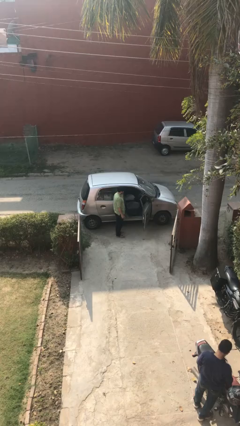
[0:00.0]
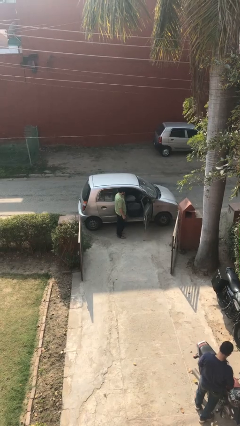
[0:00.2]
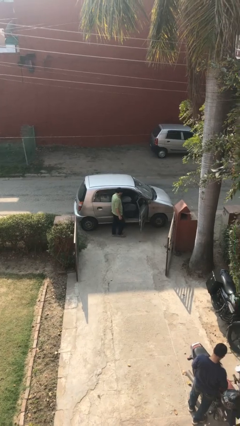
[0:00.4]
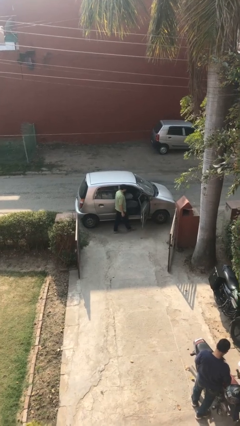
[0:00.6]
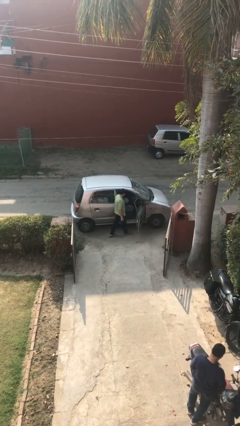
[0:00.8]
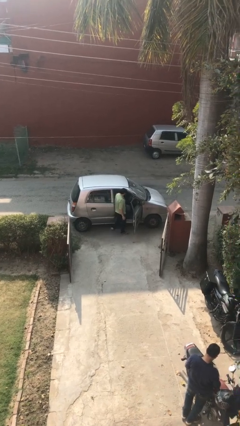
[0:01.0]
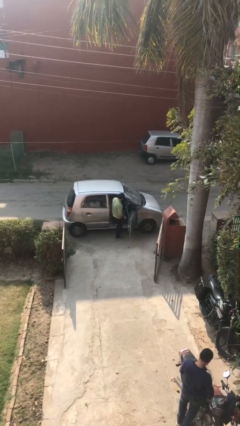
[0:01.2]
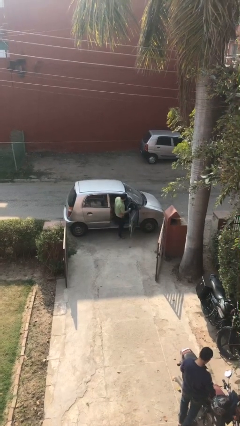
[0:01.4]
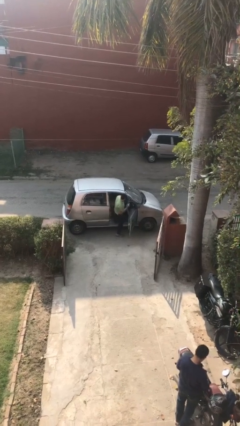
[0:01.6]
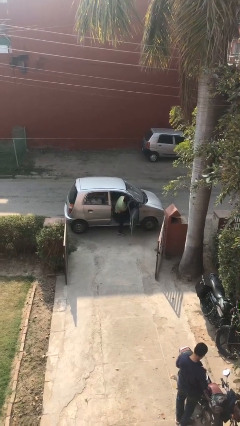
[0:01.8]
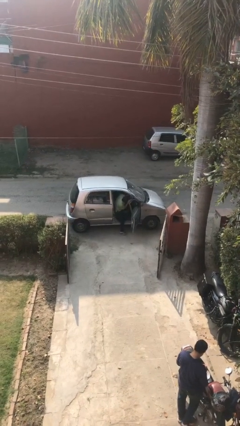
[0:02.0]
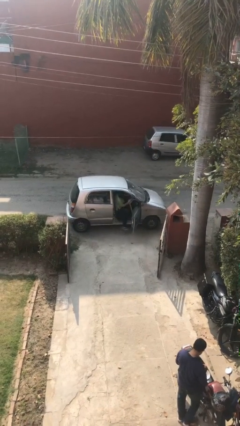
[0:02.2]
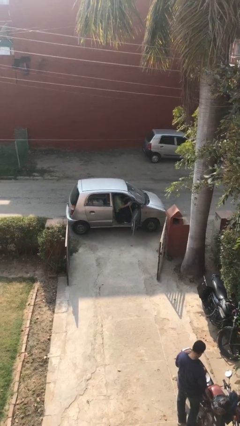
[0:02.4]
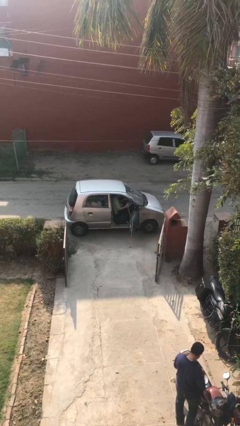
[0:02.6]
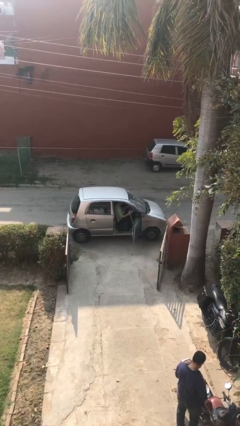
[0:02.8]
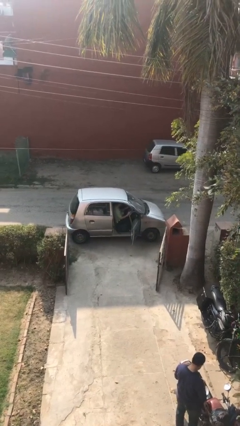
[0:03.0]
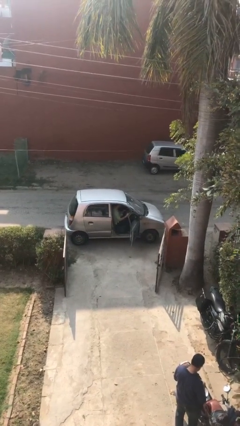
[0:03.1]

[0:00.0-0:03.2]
person enters car

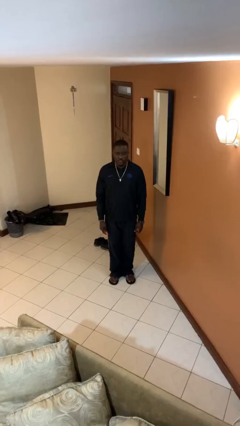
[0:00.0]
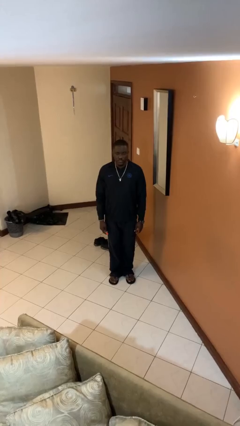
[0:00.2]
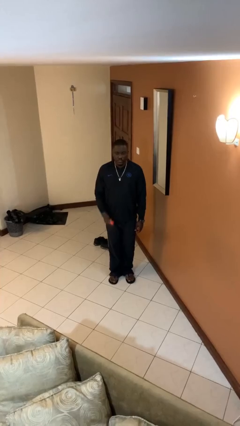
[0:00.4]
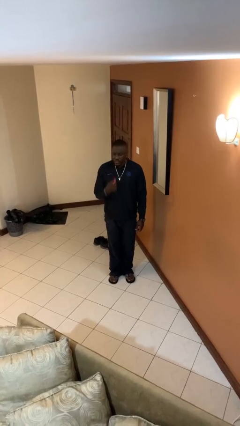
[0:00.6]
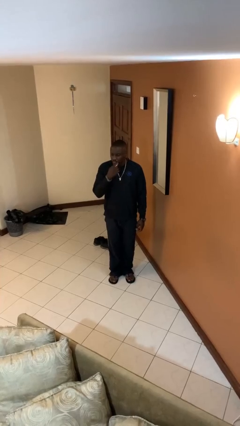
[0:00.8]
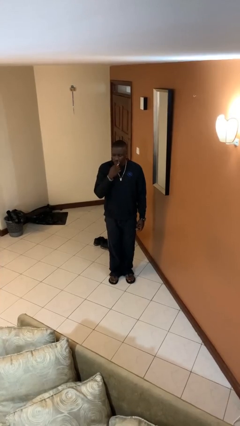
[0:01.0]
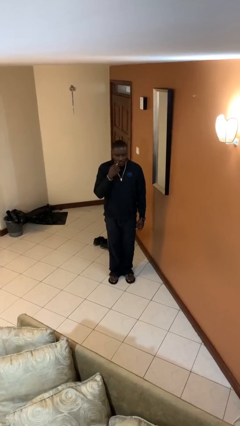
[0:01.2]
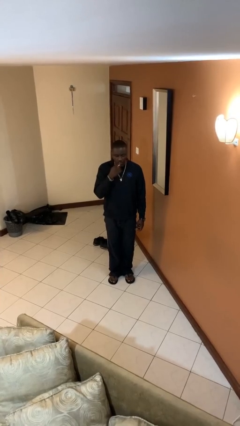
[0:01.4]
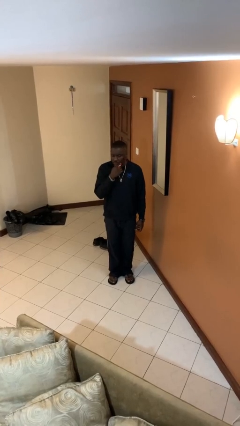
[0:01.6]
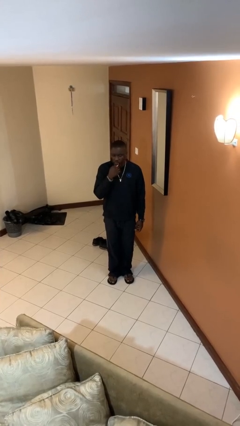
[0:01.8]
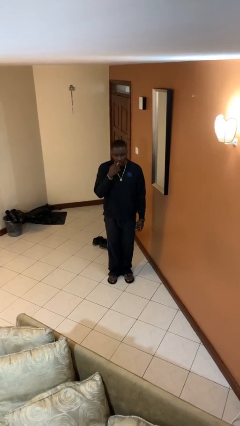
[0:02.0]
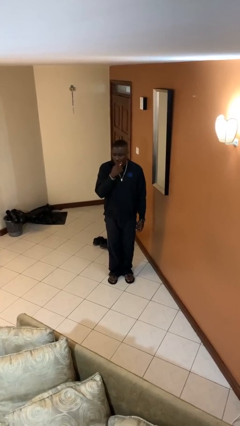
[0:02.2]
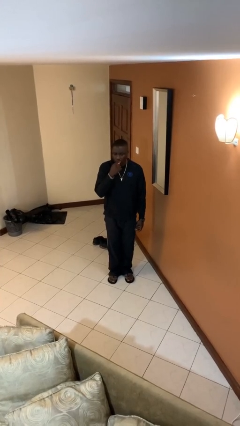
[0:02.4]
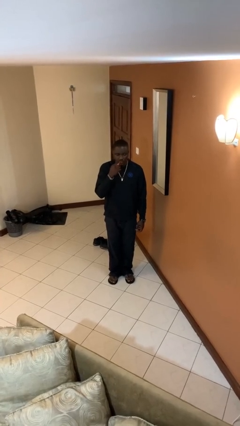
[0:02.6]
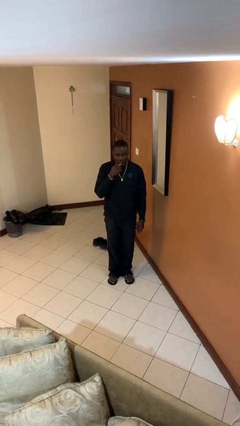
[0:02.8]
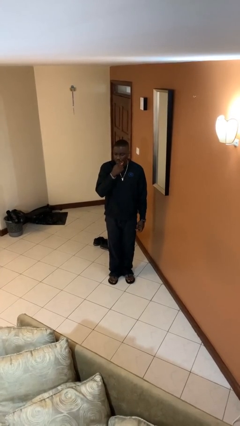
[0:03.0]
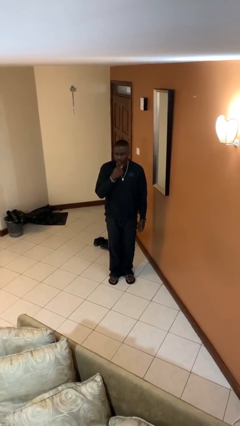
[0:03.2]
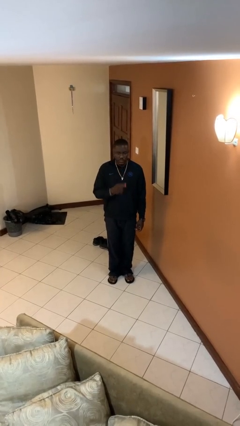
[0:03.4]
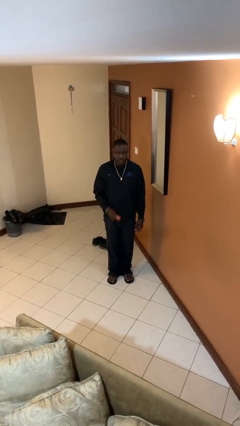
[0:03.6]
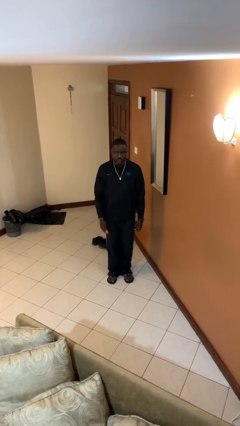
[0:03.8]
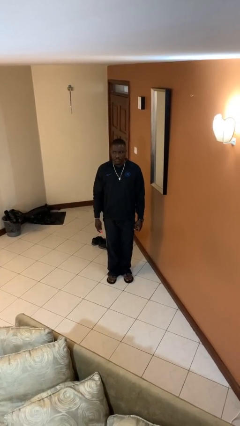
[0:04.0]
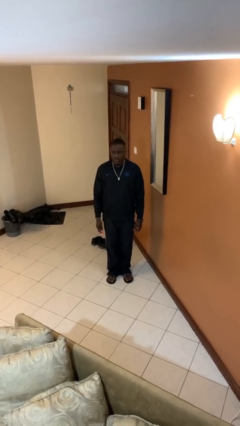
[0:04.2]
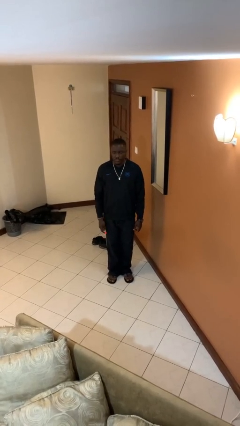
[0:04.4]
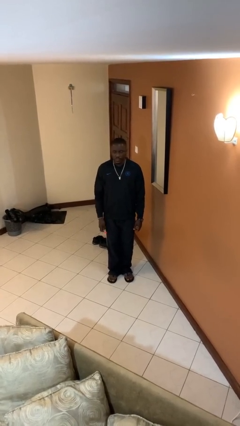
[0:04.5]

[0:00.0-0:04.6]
person applies lip makeup

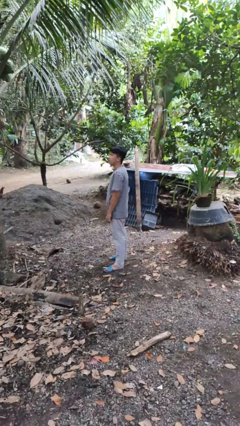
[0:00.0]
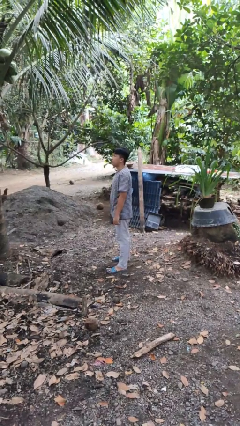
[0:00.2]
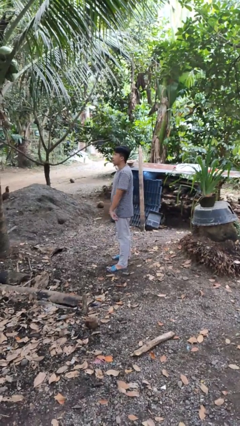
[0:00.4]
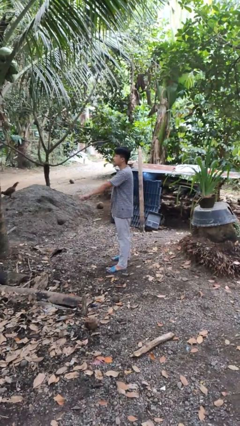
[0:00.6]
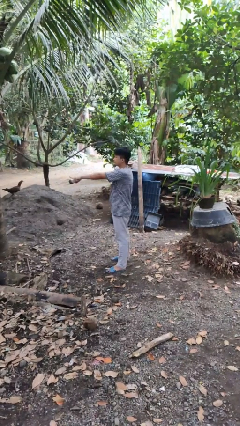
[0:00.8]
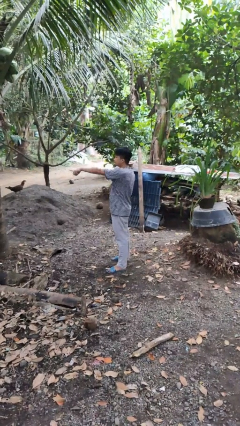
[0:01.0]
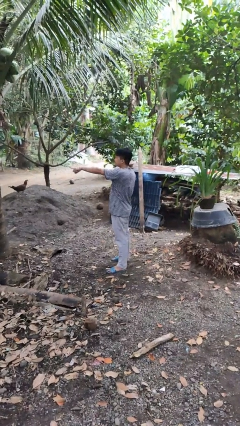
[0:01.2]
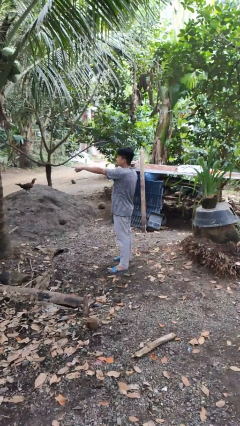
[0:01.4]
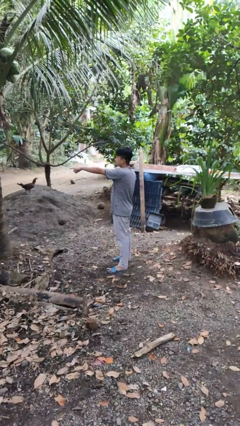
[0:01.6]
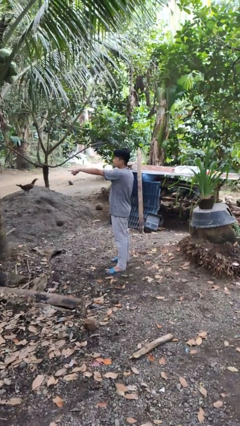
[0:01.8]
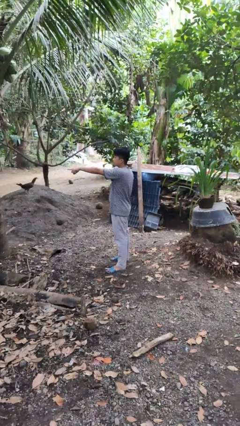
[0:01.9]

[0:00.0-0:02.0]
person points at person

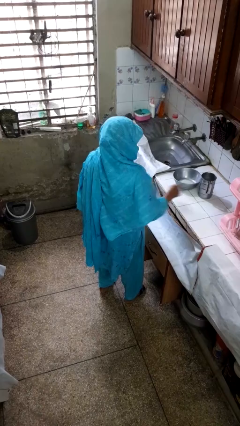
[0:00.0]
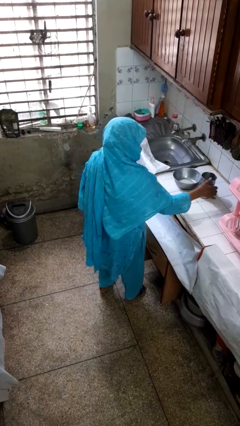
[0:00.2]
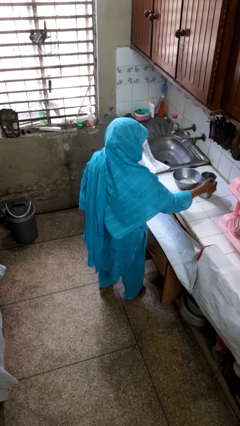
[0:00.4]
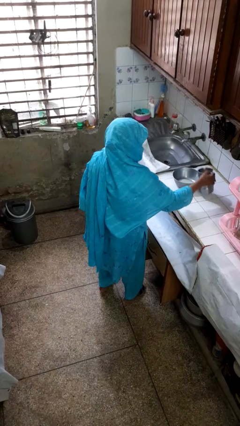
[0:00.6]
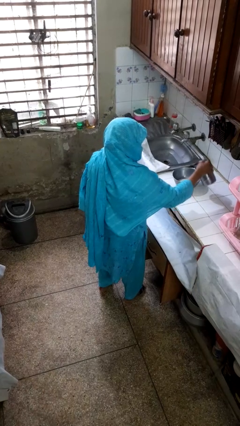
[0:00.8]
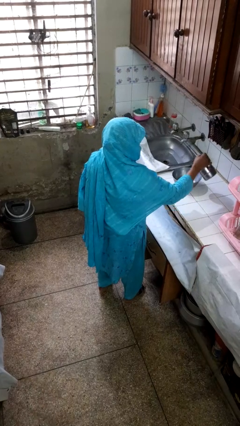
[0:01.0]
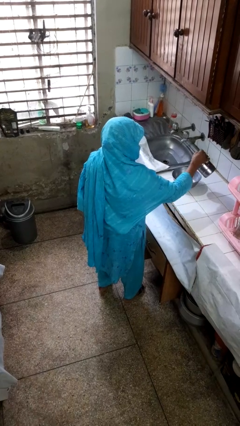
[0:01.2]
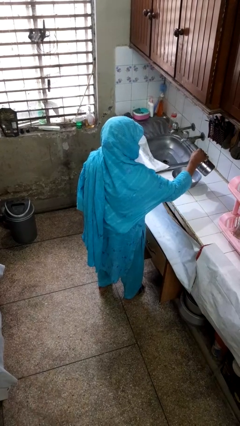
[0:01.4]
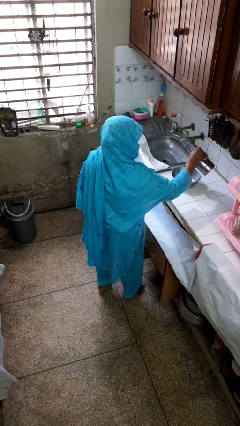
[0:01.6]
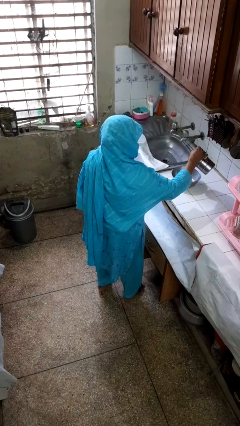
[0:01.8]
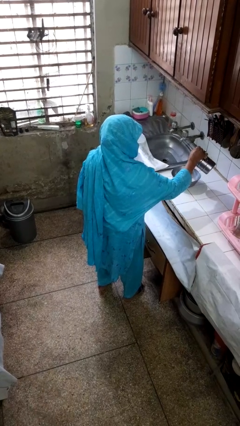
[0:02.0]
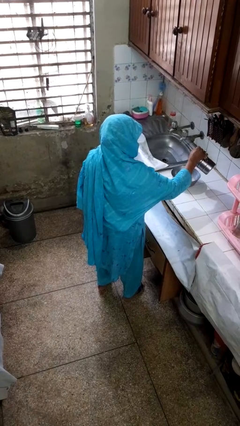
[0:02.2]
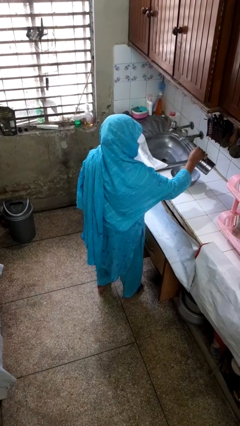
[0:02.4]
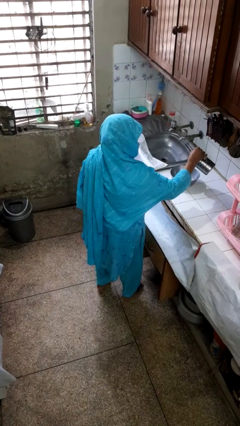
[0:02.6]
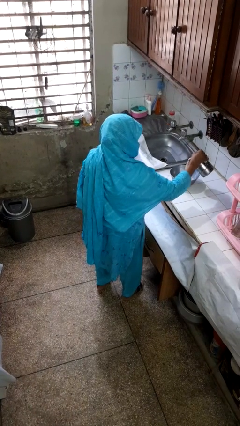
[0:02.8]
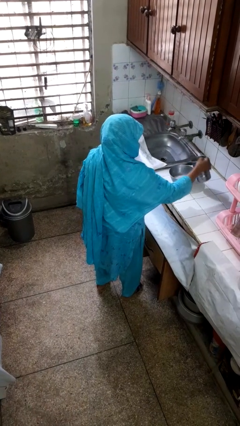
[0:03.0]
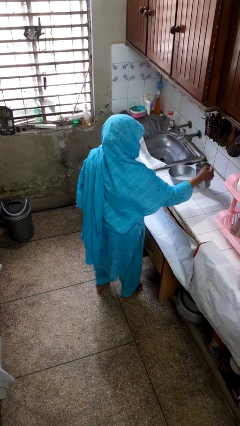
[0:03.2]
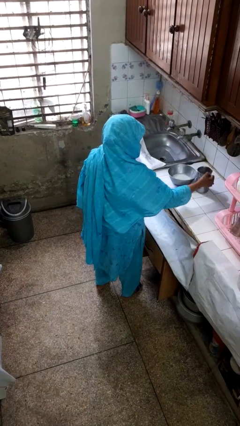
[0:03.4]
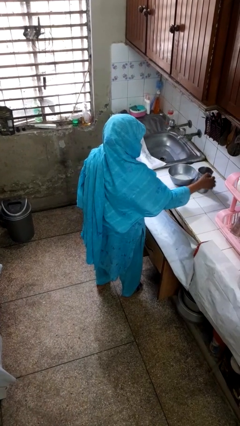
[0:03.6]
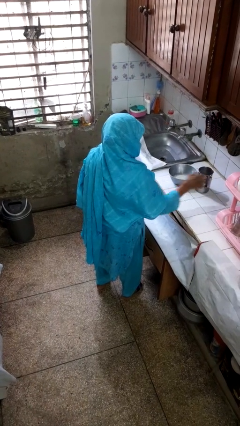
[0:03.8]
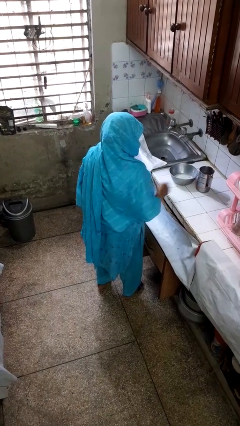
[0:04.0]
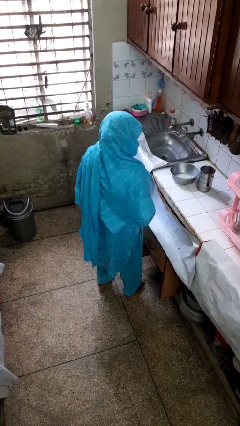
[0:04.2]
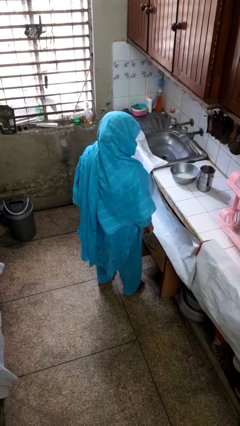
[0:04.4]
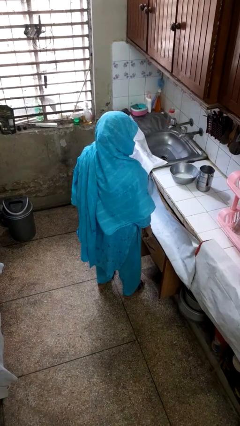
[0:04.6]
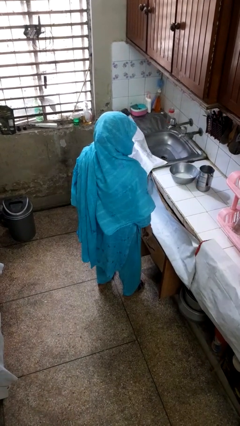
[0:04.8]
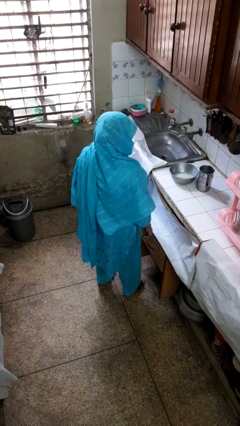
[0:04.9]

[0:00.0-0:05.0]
person pours into bowl

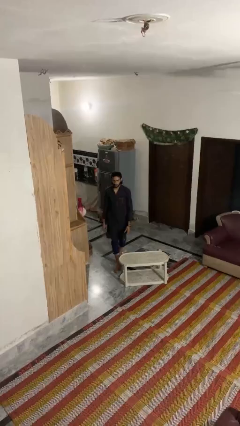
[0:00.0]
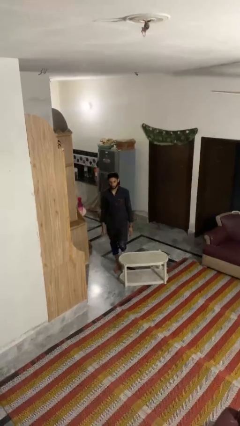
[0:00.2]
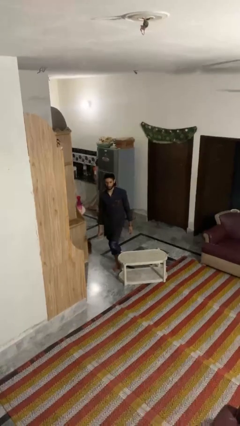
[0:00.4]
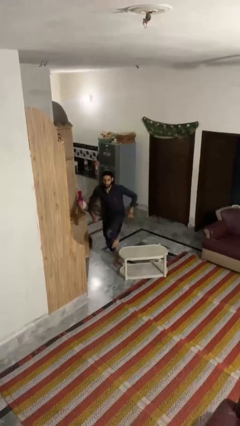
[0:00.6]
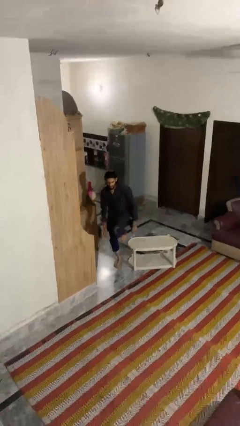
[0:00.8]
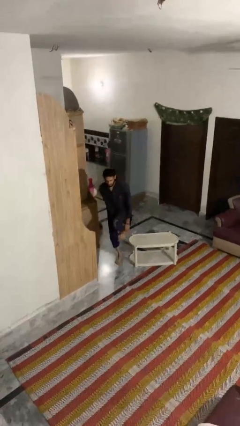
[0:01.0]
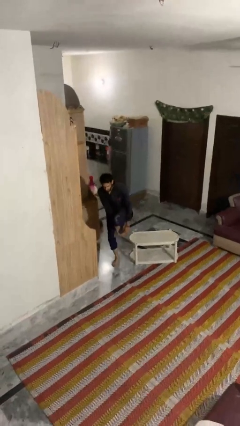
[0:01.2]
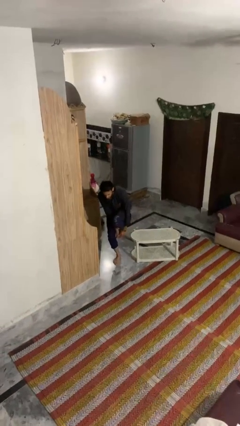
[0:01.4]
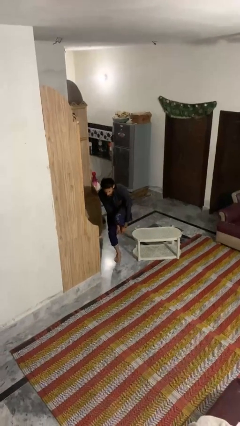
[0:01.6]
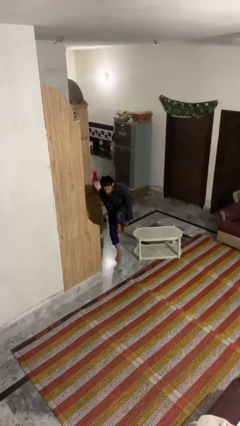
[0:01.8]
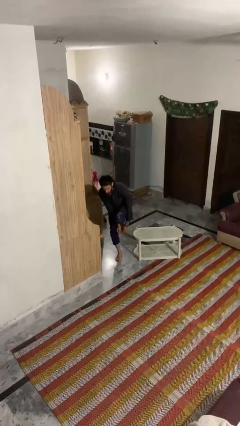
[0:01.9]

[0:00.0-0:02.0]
person bumps into table

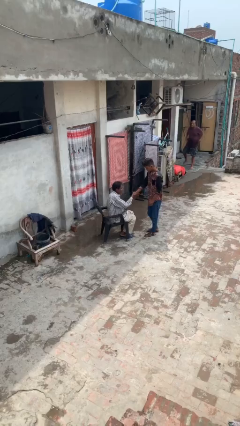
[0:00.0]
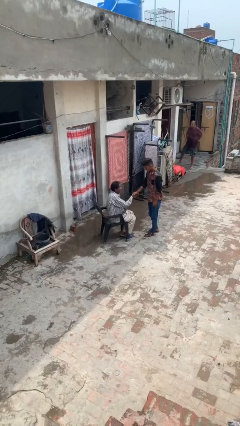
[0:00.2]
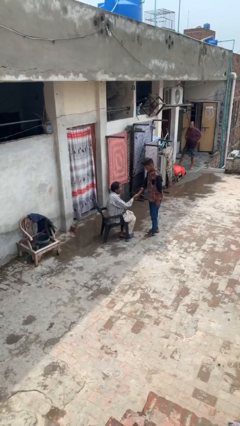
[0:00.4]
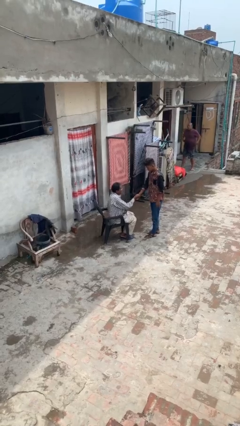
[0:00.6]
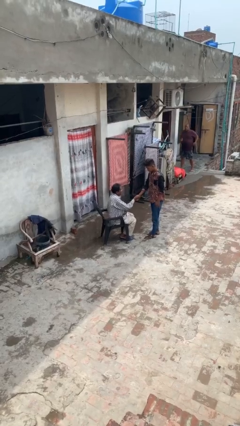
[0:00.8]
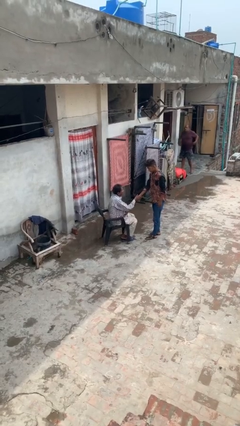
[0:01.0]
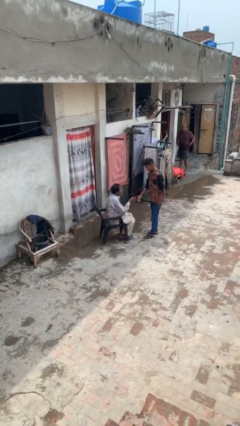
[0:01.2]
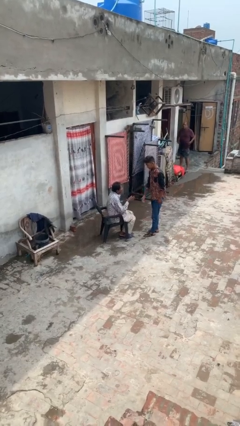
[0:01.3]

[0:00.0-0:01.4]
person shakes hand
